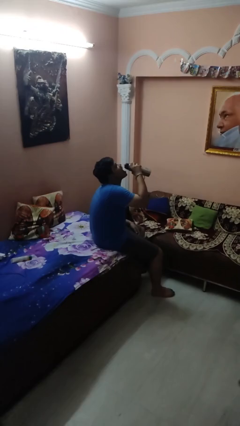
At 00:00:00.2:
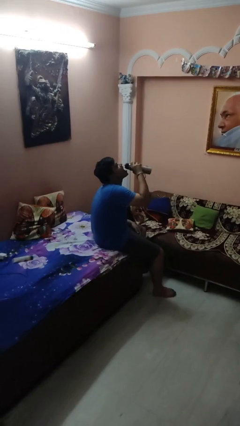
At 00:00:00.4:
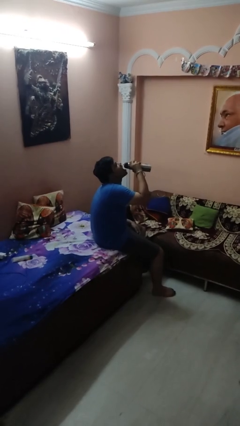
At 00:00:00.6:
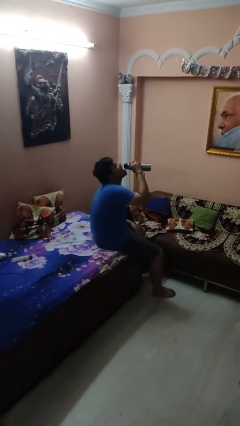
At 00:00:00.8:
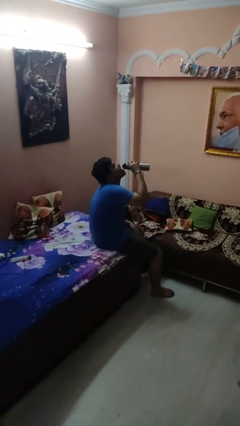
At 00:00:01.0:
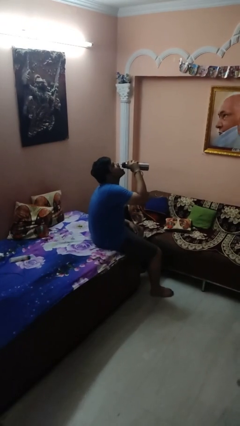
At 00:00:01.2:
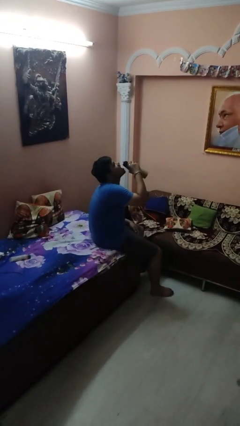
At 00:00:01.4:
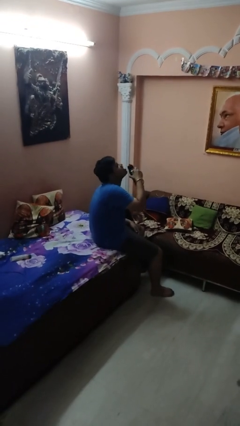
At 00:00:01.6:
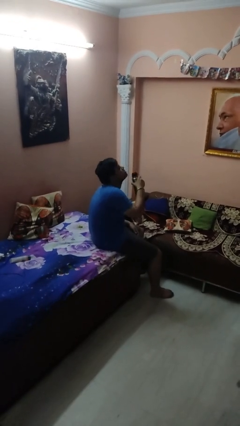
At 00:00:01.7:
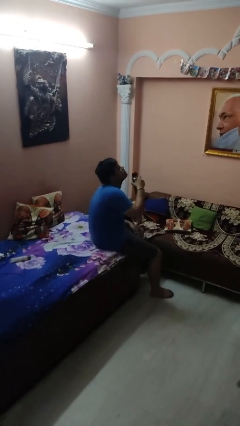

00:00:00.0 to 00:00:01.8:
person drinks from bottle

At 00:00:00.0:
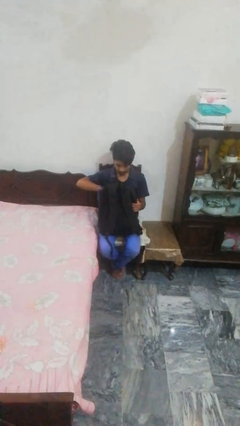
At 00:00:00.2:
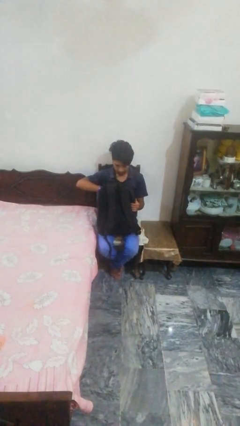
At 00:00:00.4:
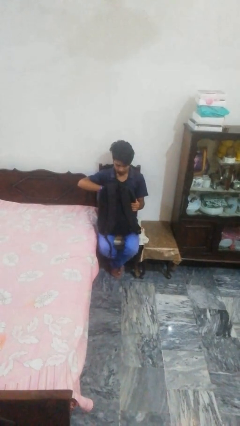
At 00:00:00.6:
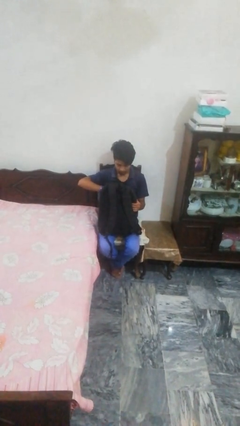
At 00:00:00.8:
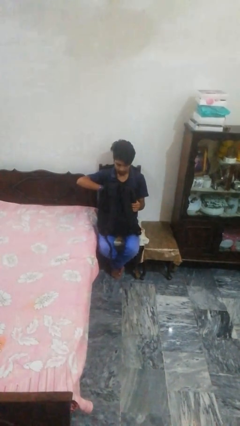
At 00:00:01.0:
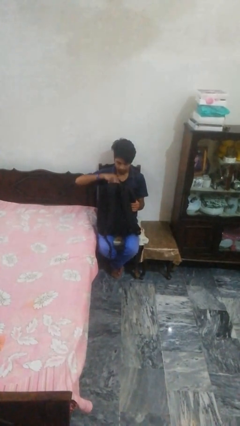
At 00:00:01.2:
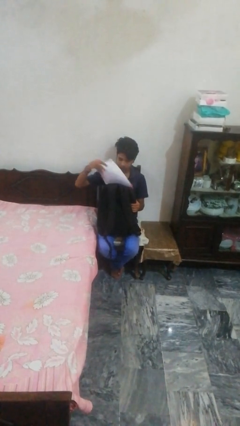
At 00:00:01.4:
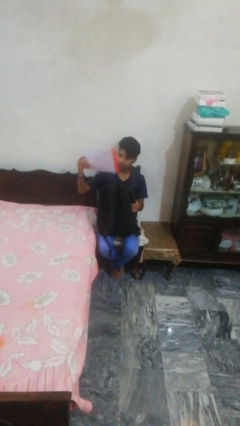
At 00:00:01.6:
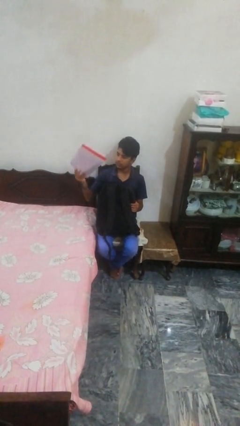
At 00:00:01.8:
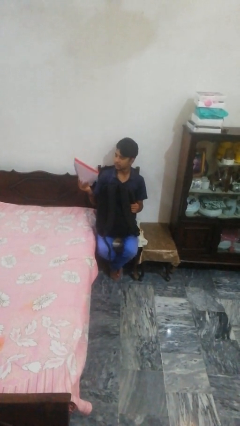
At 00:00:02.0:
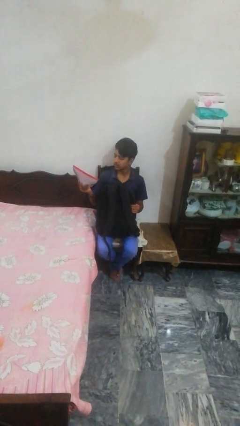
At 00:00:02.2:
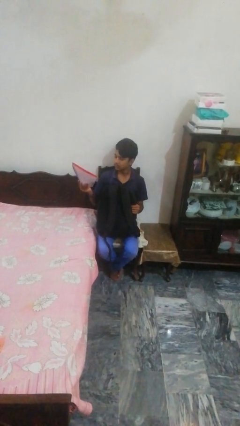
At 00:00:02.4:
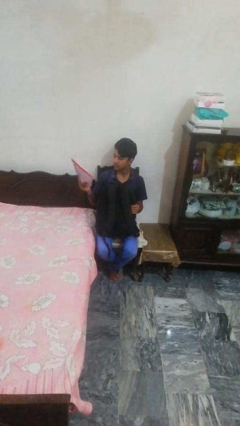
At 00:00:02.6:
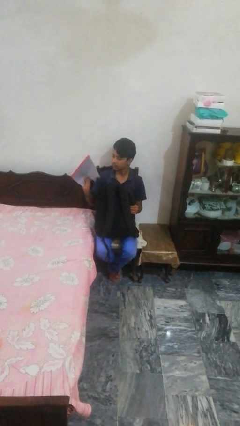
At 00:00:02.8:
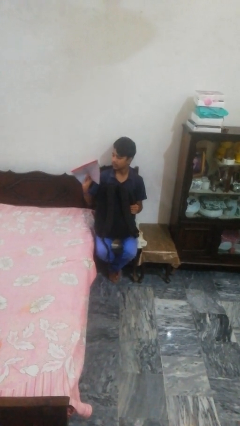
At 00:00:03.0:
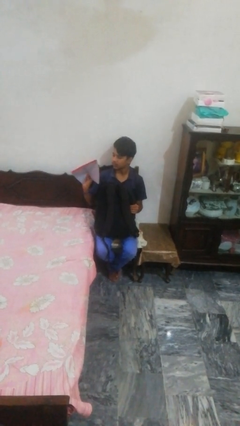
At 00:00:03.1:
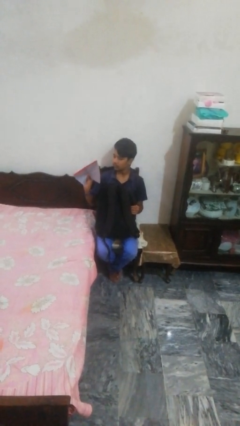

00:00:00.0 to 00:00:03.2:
person takes object from backpack

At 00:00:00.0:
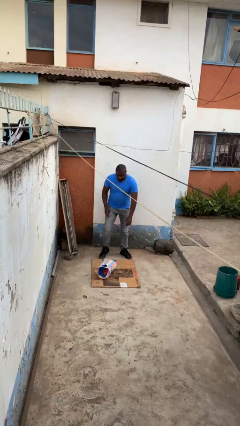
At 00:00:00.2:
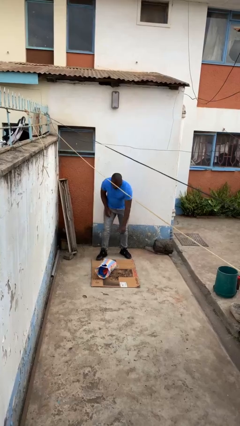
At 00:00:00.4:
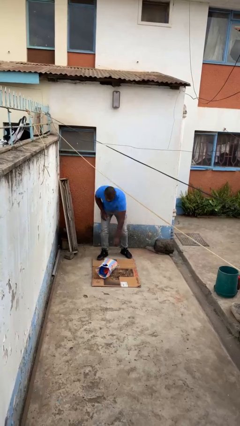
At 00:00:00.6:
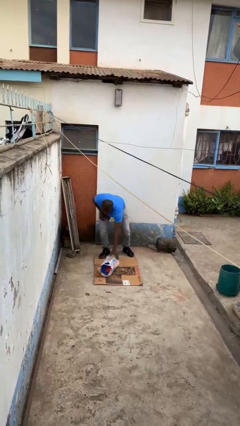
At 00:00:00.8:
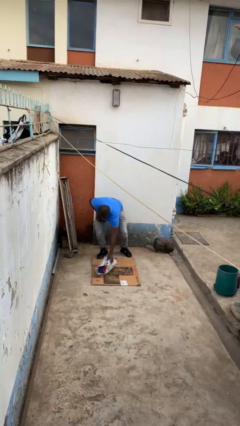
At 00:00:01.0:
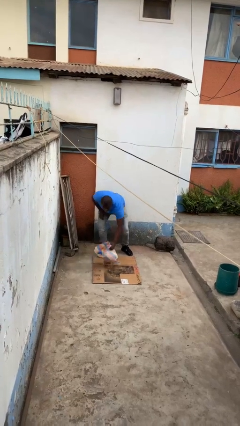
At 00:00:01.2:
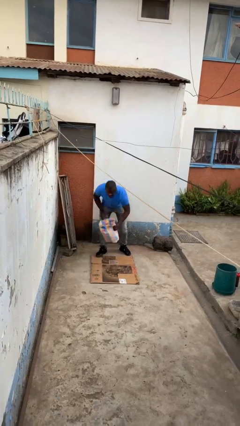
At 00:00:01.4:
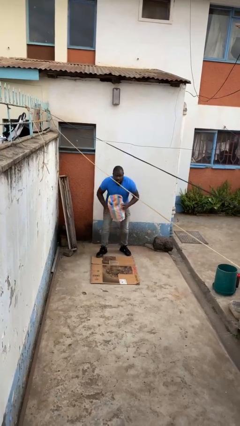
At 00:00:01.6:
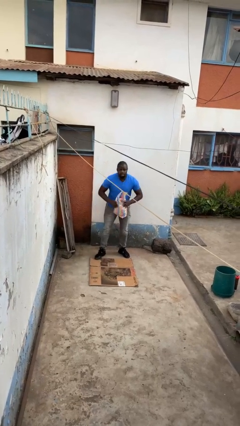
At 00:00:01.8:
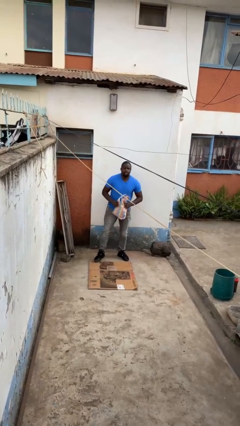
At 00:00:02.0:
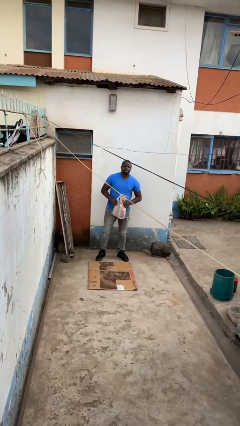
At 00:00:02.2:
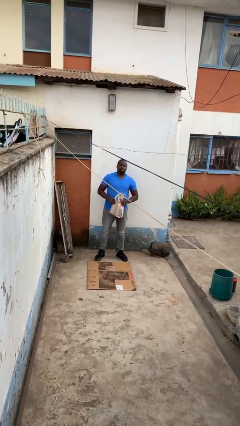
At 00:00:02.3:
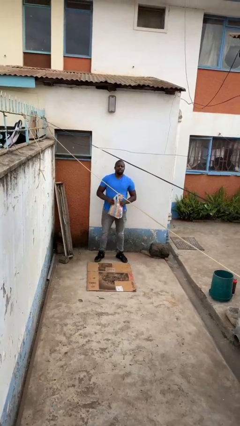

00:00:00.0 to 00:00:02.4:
person picks up object from floor

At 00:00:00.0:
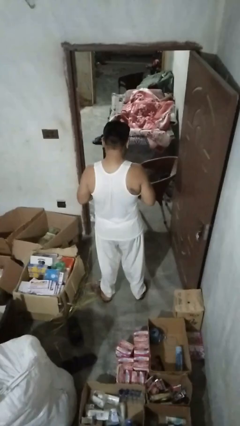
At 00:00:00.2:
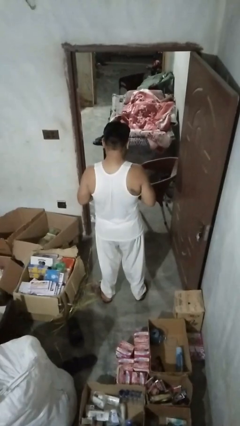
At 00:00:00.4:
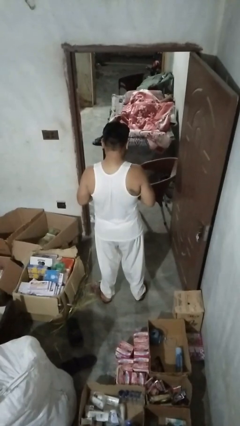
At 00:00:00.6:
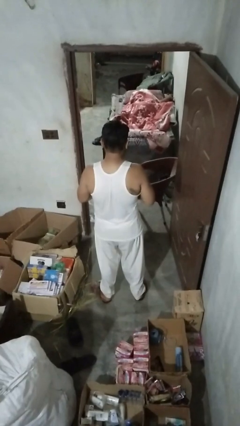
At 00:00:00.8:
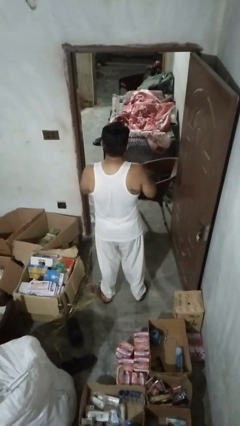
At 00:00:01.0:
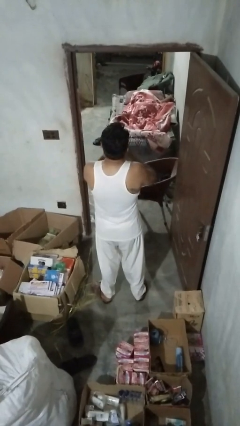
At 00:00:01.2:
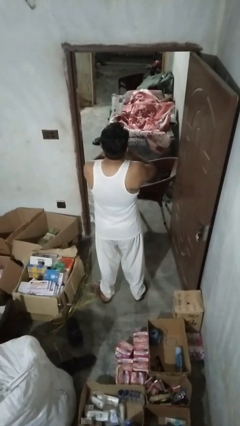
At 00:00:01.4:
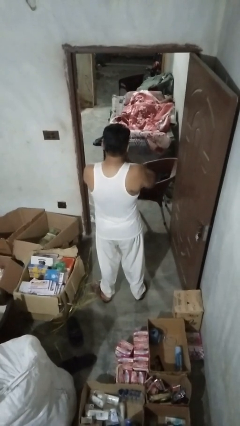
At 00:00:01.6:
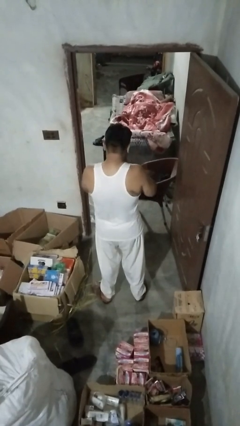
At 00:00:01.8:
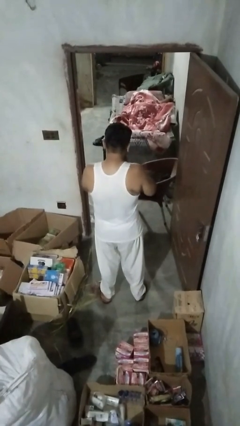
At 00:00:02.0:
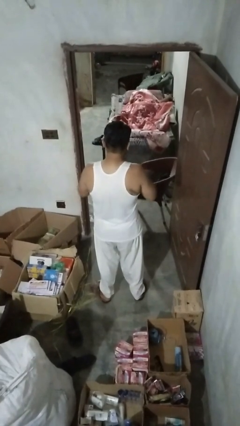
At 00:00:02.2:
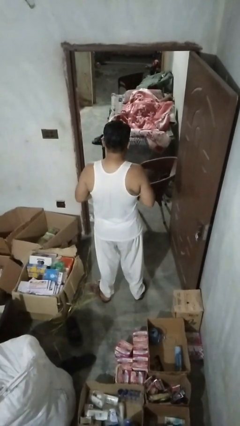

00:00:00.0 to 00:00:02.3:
person sneezes into hand

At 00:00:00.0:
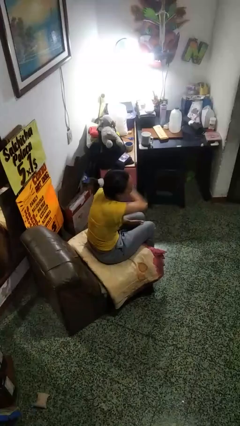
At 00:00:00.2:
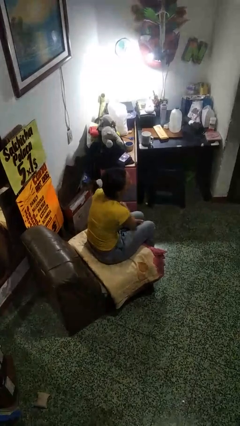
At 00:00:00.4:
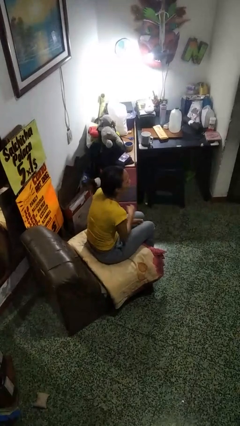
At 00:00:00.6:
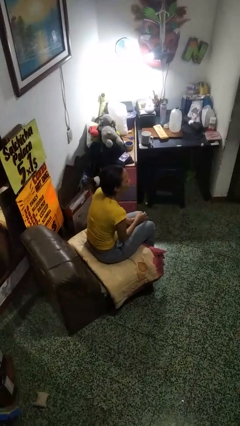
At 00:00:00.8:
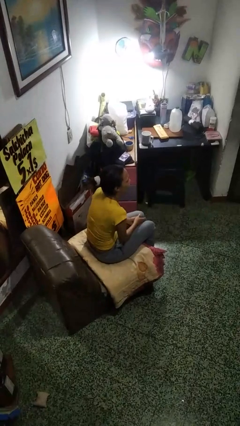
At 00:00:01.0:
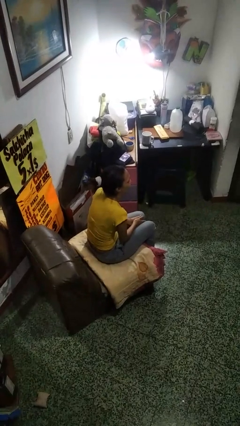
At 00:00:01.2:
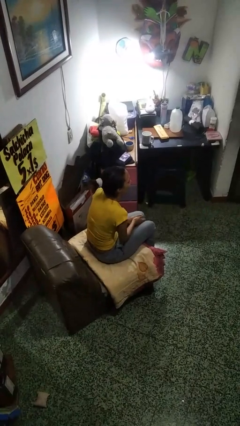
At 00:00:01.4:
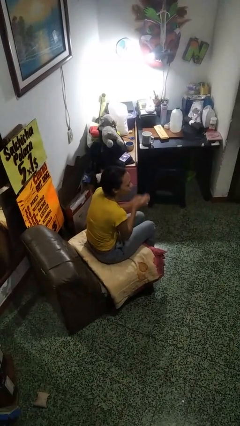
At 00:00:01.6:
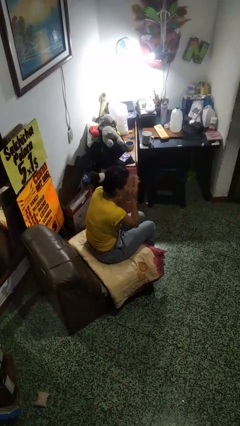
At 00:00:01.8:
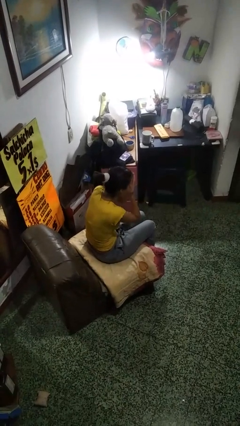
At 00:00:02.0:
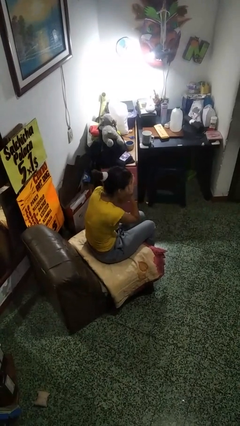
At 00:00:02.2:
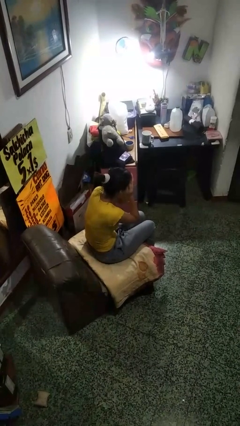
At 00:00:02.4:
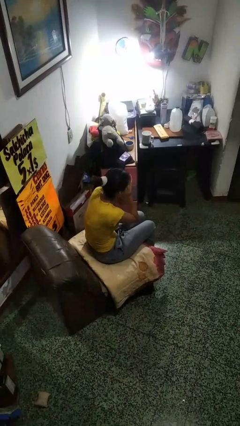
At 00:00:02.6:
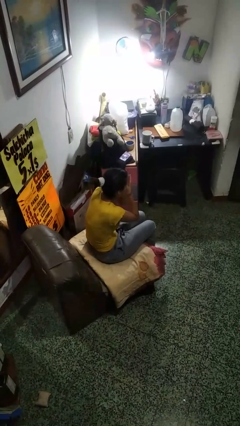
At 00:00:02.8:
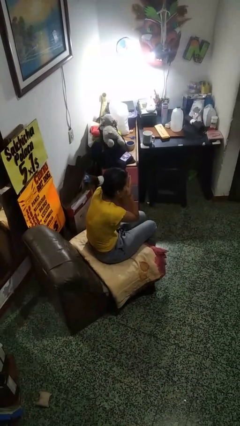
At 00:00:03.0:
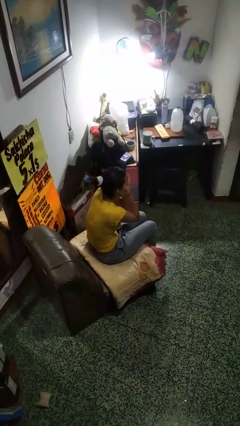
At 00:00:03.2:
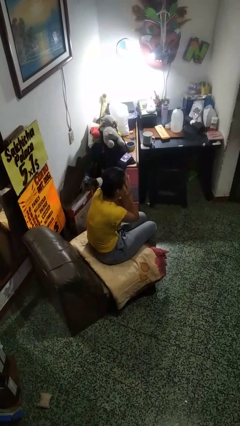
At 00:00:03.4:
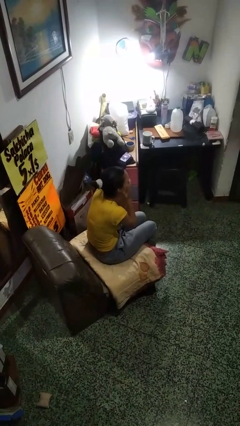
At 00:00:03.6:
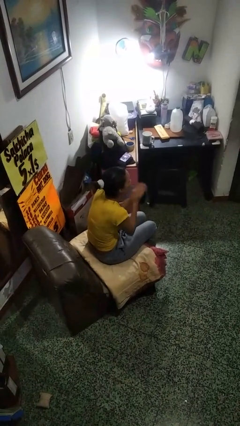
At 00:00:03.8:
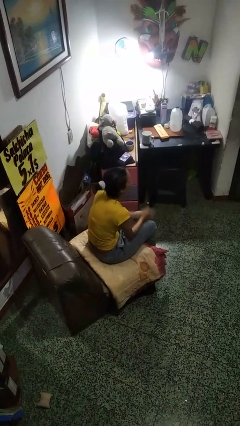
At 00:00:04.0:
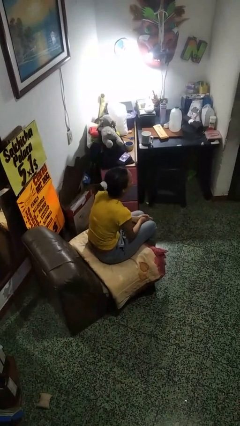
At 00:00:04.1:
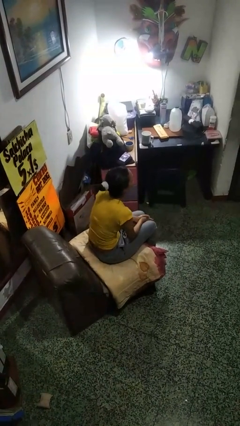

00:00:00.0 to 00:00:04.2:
person covers face with hands

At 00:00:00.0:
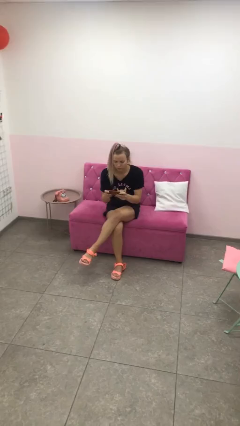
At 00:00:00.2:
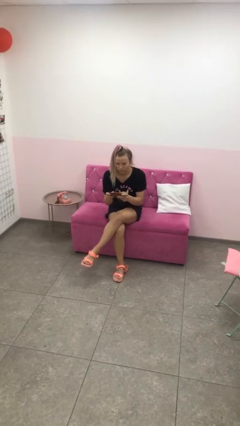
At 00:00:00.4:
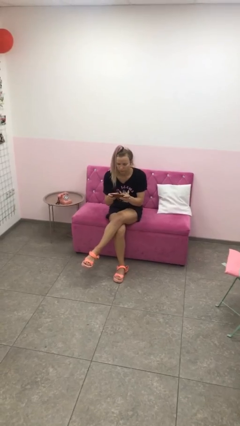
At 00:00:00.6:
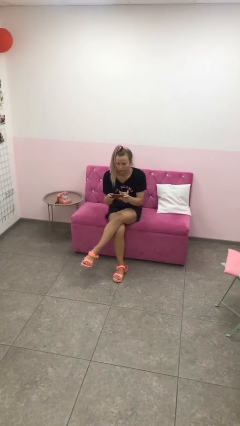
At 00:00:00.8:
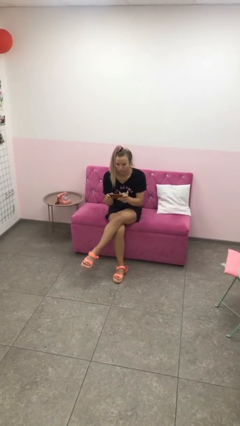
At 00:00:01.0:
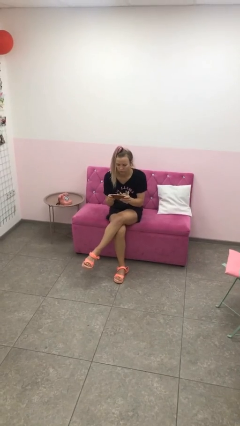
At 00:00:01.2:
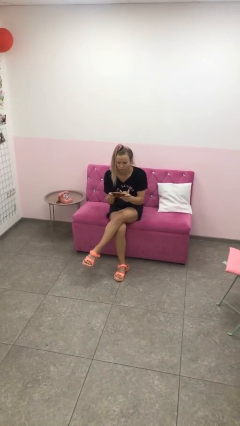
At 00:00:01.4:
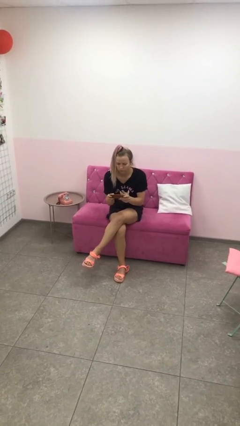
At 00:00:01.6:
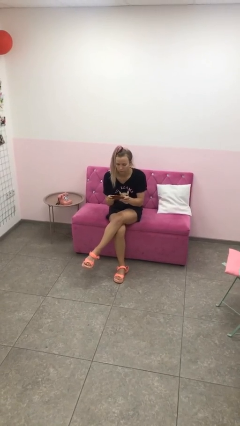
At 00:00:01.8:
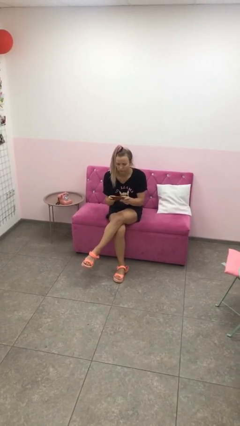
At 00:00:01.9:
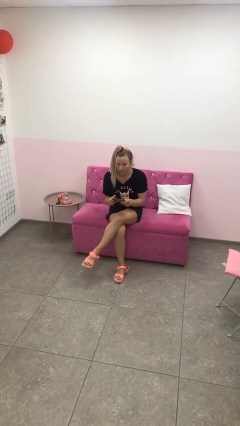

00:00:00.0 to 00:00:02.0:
person interacts with handheld game

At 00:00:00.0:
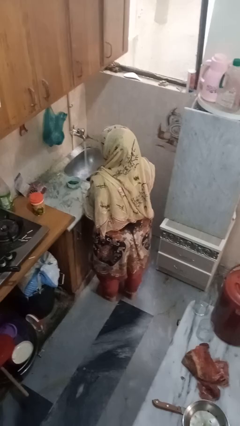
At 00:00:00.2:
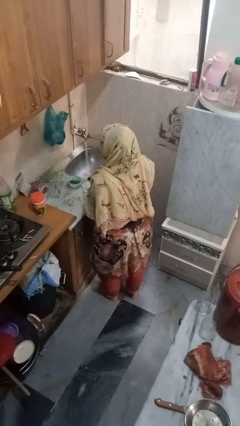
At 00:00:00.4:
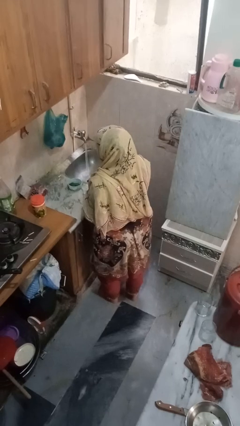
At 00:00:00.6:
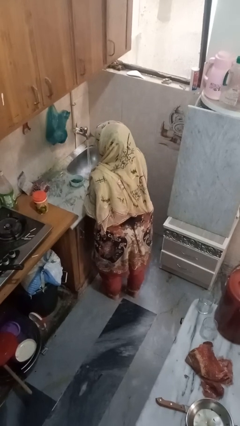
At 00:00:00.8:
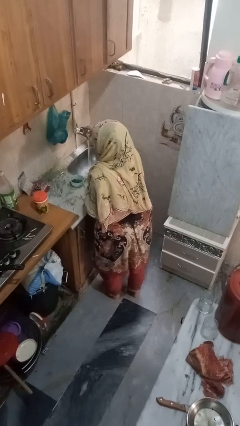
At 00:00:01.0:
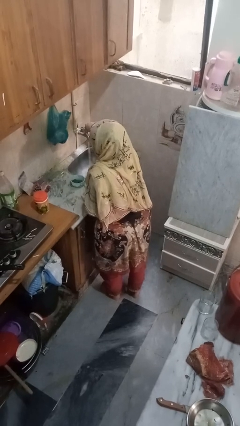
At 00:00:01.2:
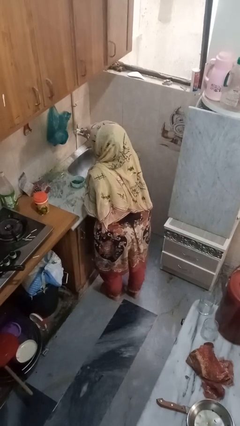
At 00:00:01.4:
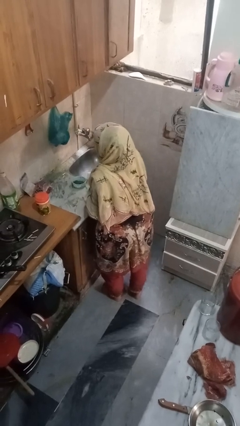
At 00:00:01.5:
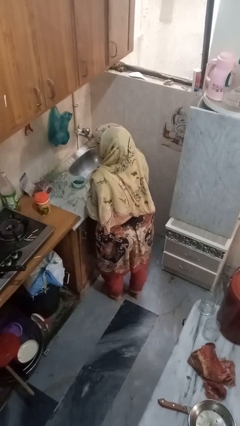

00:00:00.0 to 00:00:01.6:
person turns off faucet
